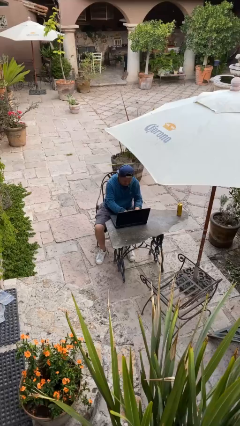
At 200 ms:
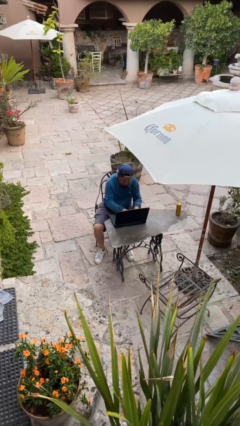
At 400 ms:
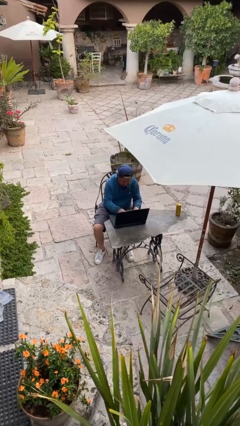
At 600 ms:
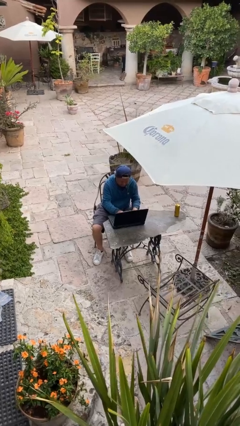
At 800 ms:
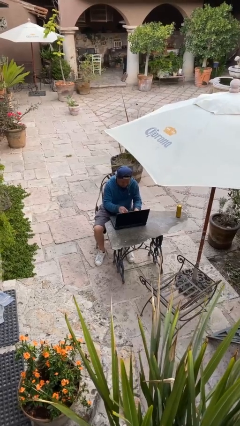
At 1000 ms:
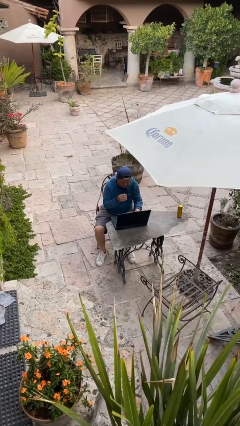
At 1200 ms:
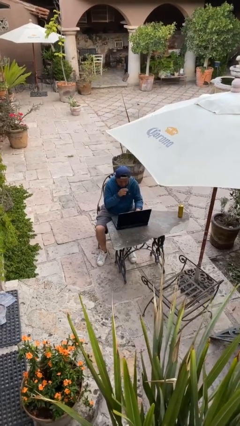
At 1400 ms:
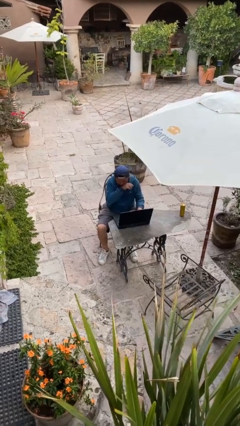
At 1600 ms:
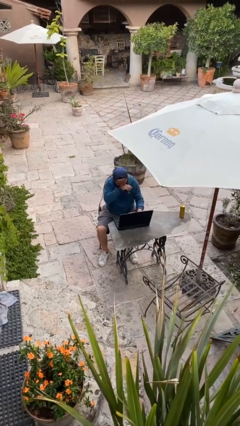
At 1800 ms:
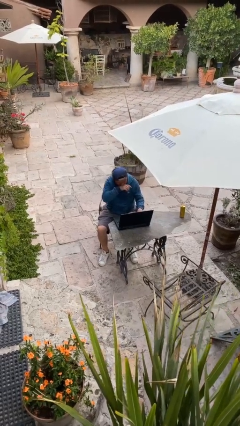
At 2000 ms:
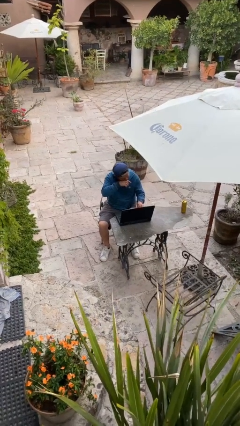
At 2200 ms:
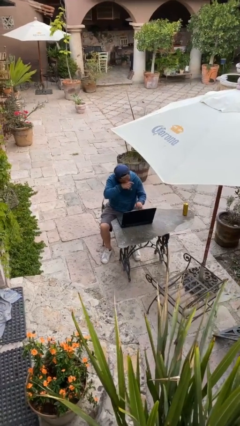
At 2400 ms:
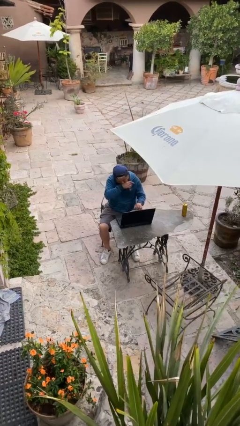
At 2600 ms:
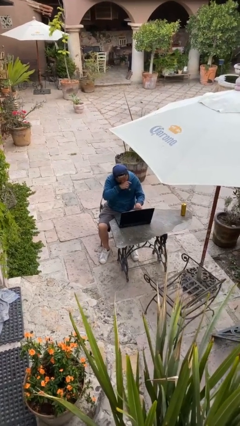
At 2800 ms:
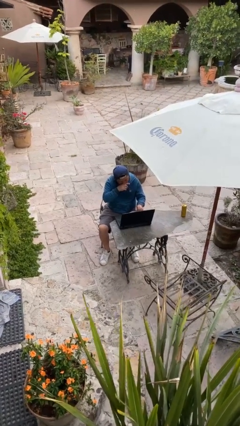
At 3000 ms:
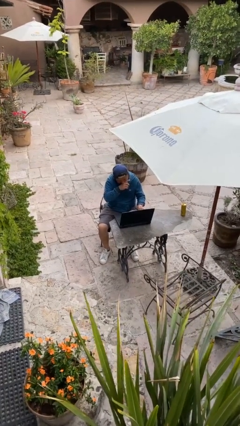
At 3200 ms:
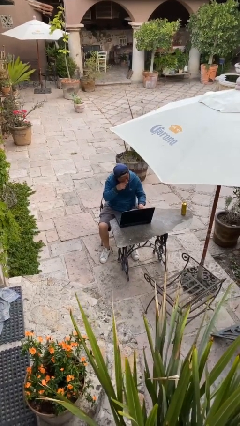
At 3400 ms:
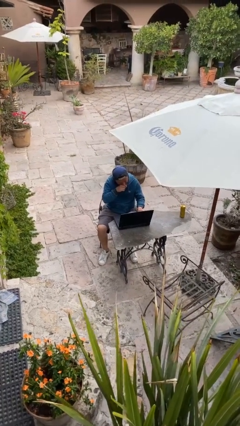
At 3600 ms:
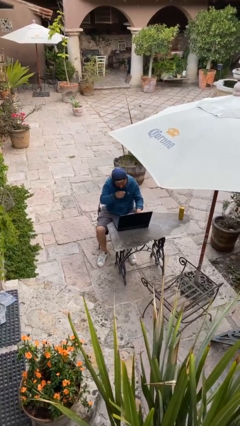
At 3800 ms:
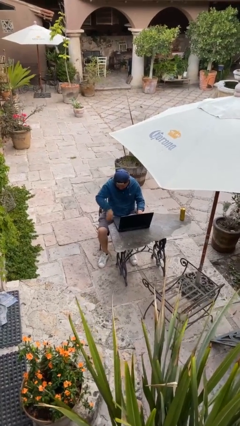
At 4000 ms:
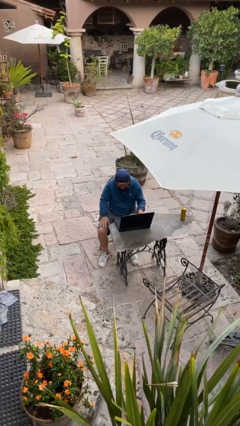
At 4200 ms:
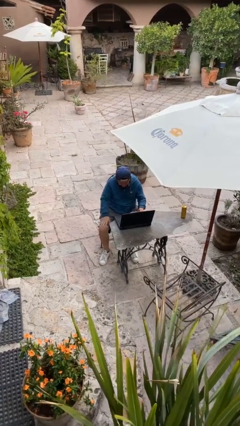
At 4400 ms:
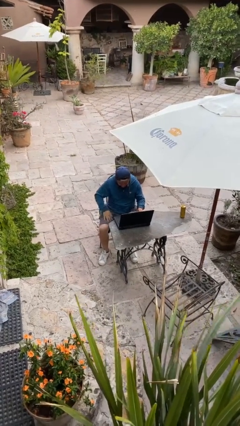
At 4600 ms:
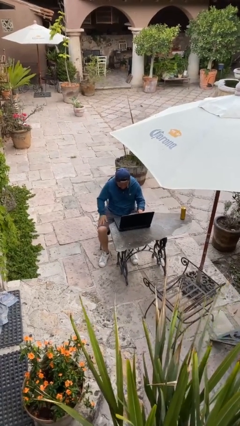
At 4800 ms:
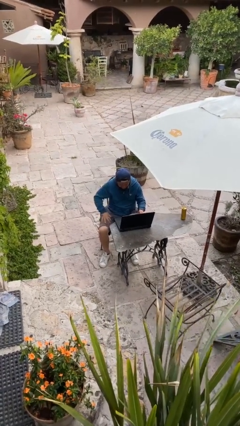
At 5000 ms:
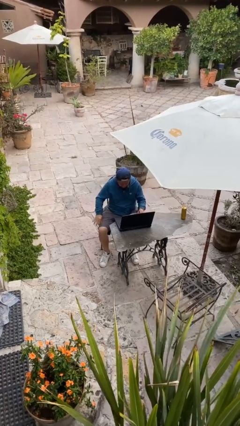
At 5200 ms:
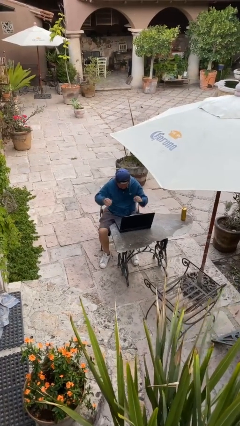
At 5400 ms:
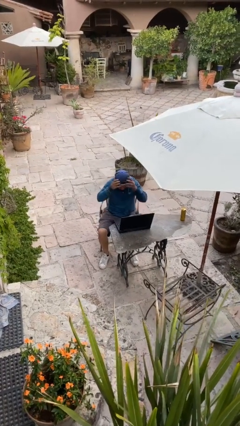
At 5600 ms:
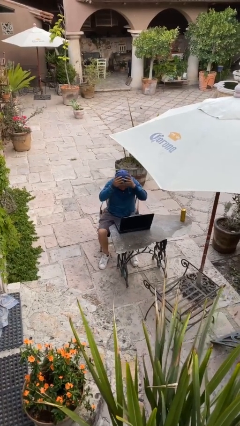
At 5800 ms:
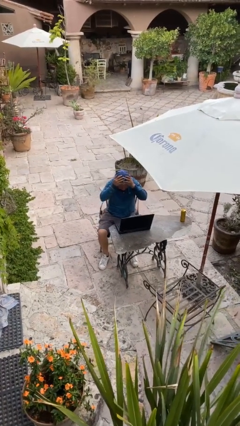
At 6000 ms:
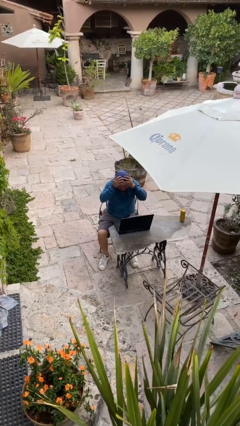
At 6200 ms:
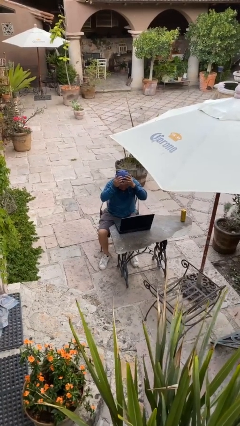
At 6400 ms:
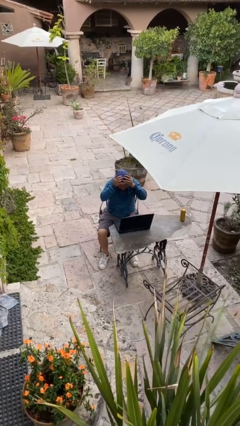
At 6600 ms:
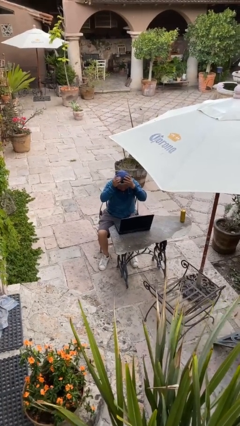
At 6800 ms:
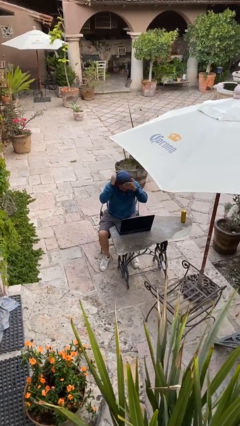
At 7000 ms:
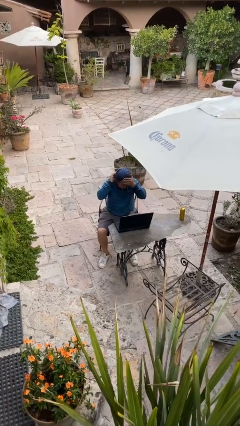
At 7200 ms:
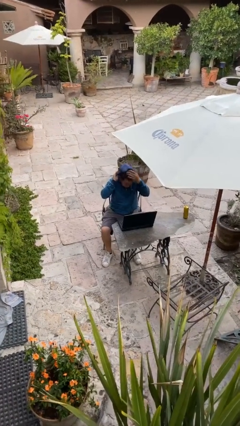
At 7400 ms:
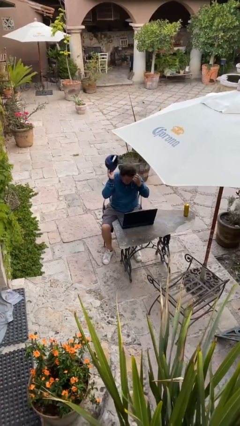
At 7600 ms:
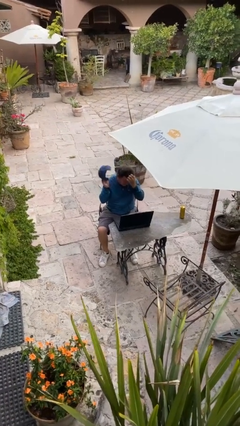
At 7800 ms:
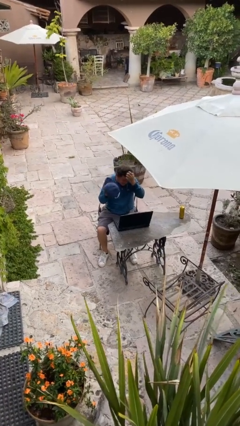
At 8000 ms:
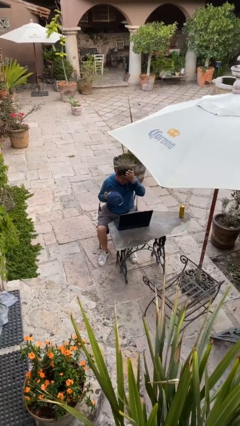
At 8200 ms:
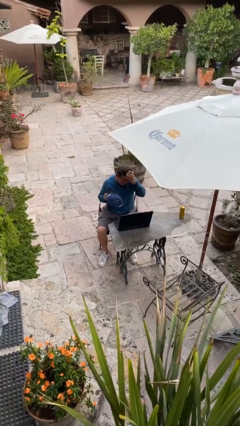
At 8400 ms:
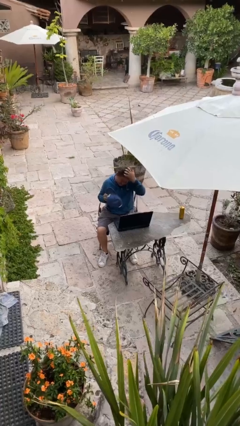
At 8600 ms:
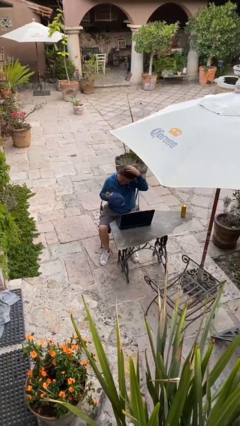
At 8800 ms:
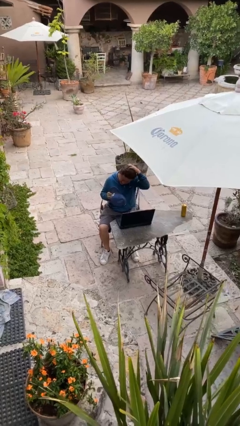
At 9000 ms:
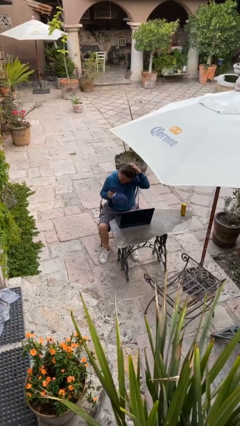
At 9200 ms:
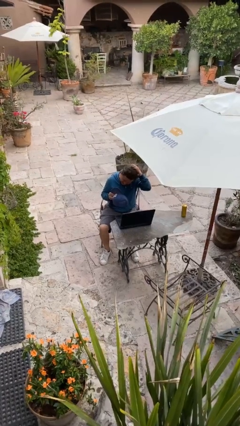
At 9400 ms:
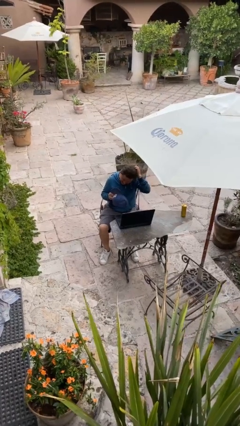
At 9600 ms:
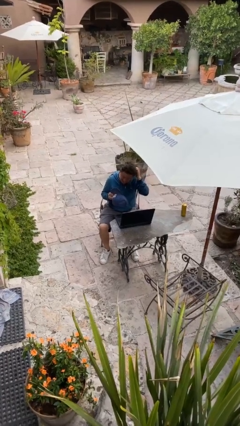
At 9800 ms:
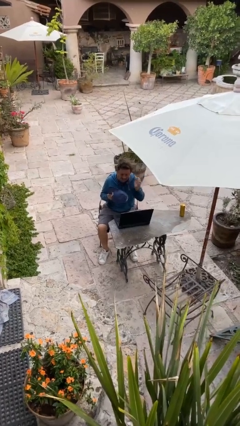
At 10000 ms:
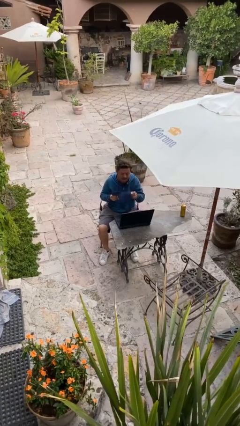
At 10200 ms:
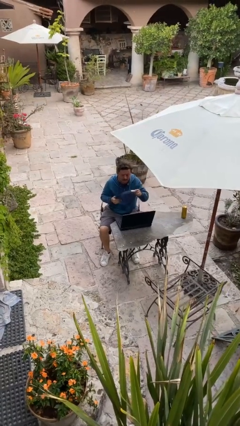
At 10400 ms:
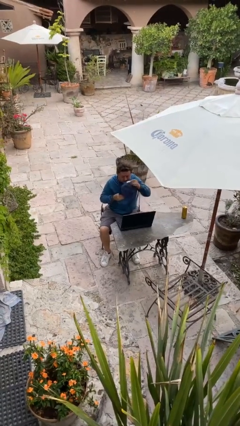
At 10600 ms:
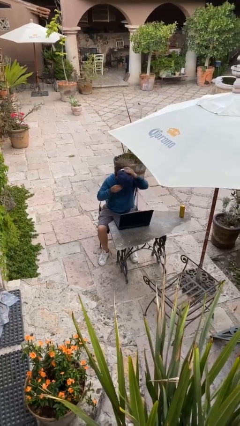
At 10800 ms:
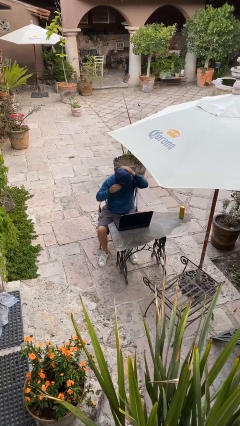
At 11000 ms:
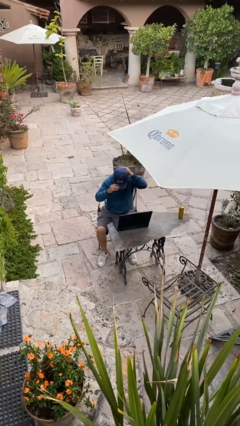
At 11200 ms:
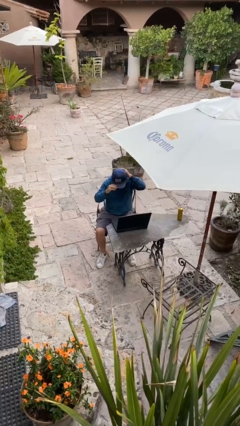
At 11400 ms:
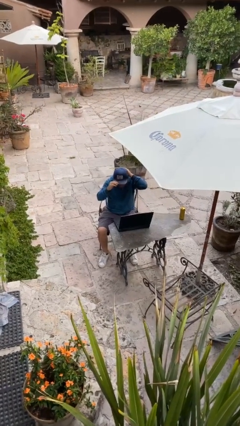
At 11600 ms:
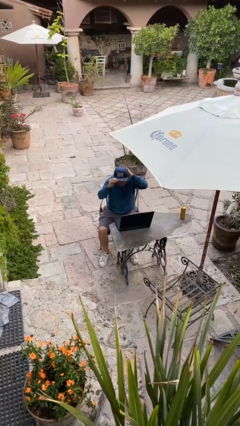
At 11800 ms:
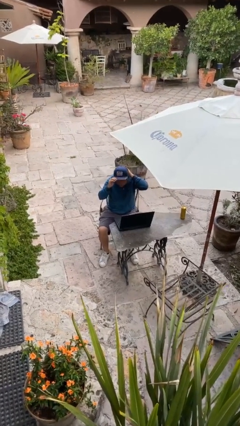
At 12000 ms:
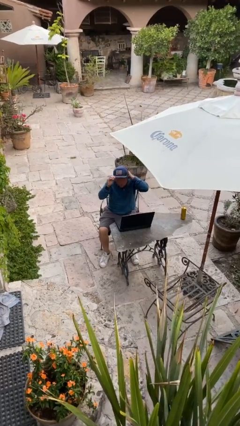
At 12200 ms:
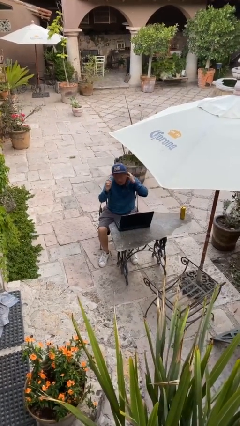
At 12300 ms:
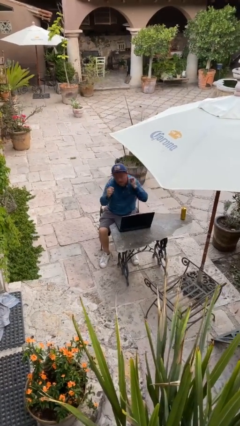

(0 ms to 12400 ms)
person interacts with laptop

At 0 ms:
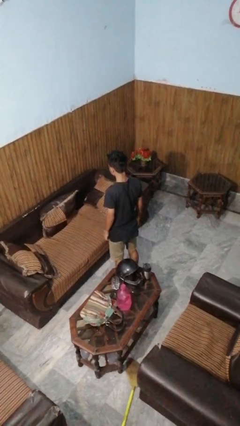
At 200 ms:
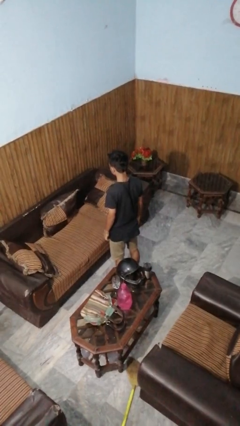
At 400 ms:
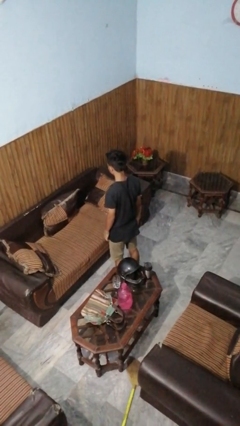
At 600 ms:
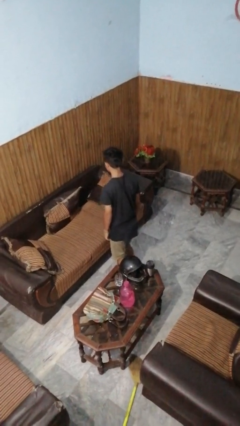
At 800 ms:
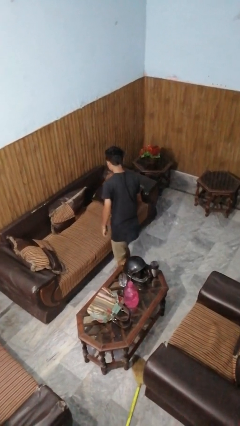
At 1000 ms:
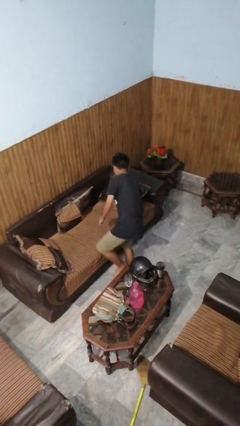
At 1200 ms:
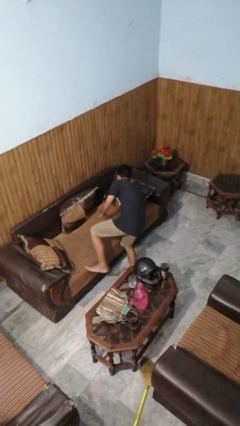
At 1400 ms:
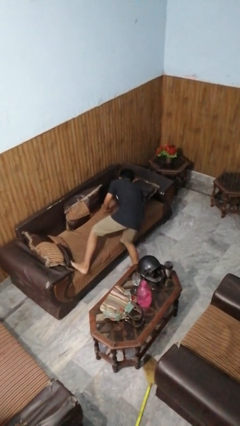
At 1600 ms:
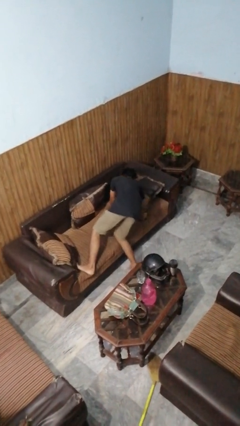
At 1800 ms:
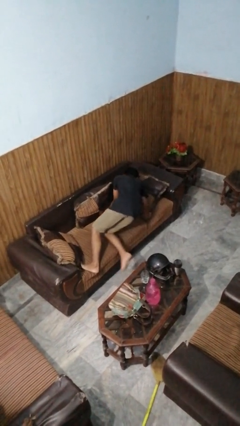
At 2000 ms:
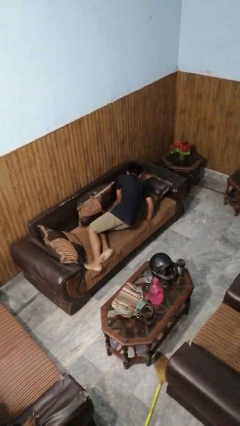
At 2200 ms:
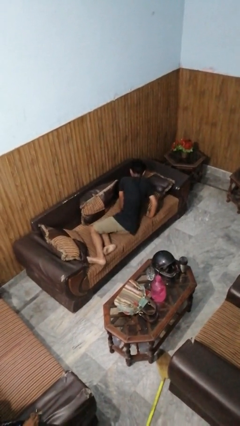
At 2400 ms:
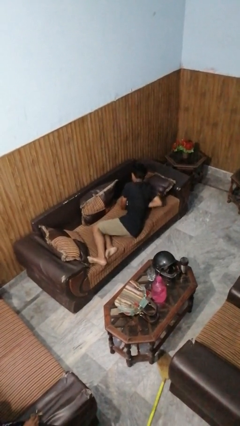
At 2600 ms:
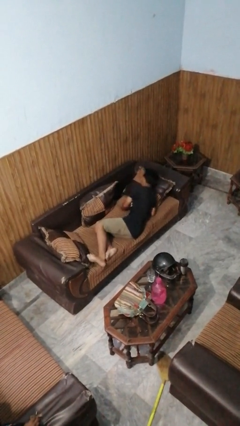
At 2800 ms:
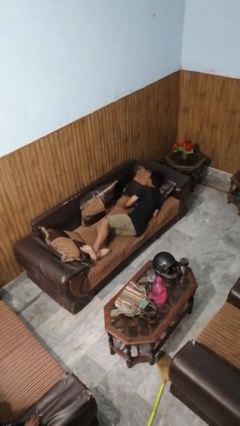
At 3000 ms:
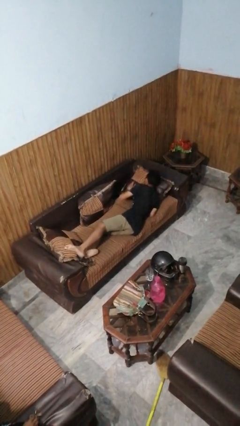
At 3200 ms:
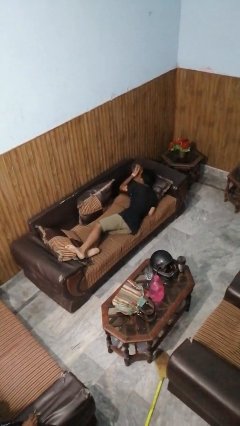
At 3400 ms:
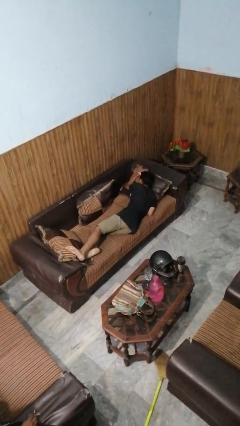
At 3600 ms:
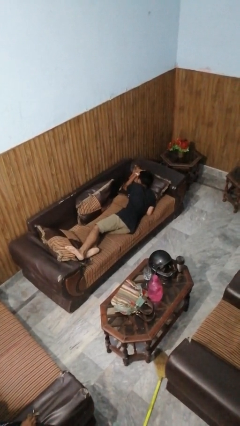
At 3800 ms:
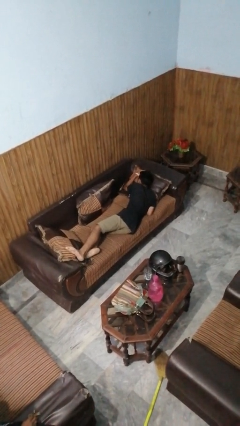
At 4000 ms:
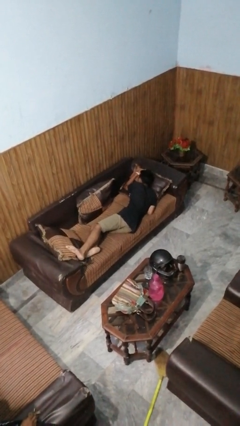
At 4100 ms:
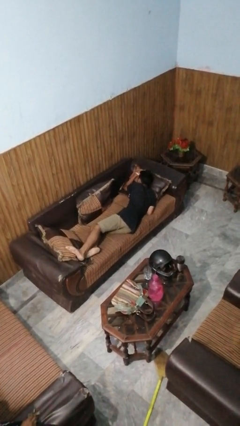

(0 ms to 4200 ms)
person lies down on couch

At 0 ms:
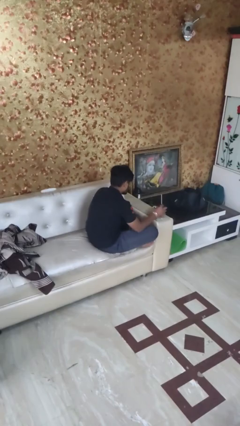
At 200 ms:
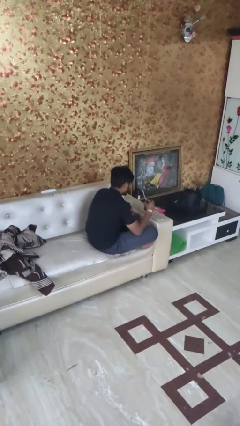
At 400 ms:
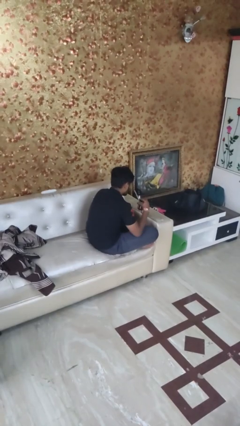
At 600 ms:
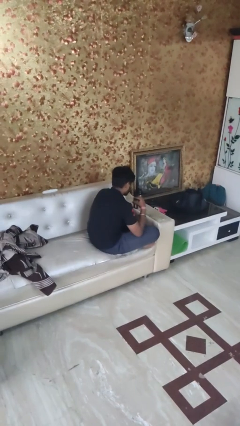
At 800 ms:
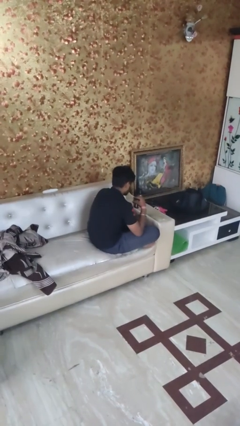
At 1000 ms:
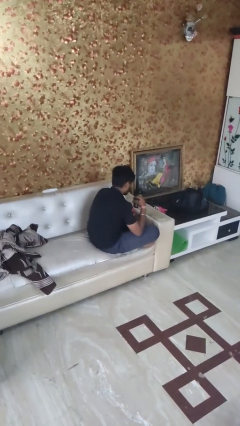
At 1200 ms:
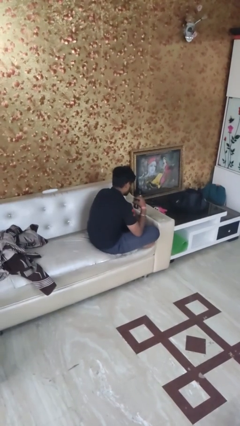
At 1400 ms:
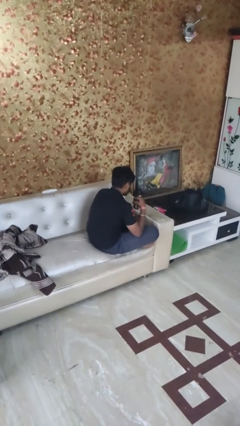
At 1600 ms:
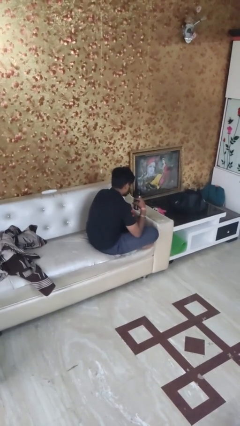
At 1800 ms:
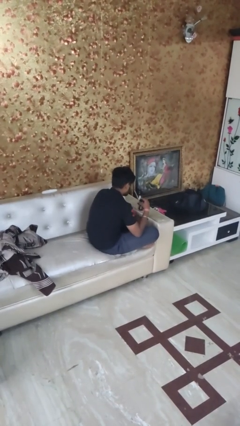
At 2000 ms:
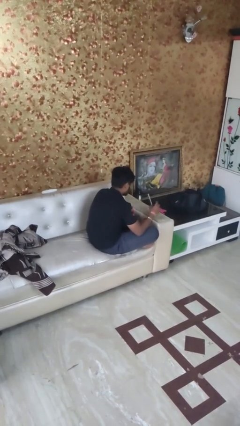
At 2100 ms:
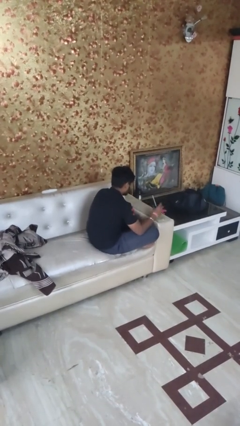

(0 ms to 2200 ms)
person drinks from straw
